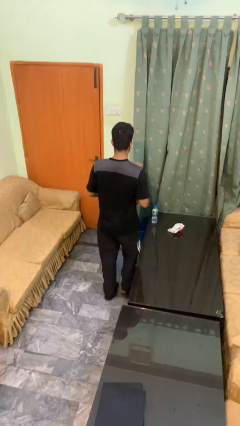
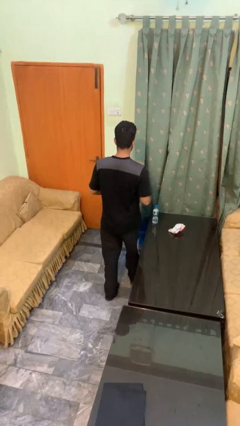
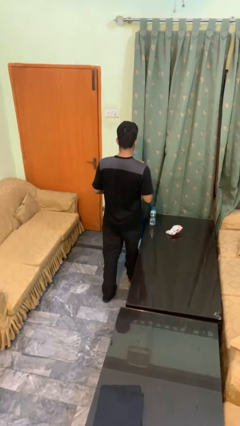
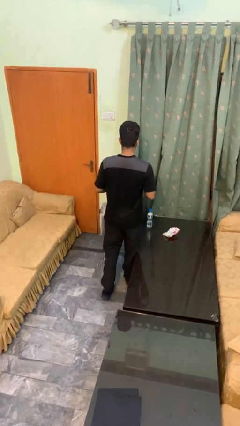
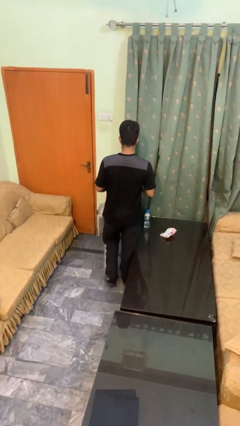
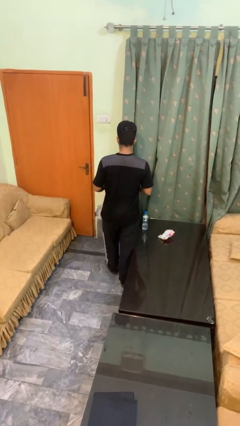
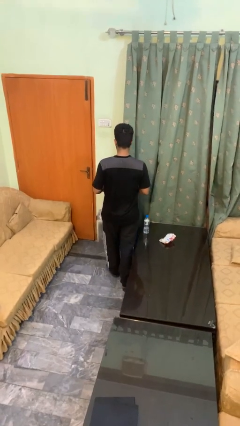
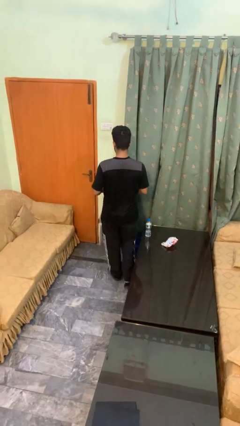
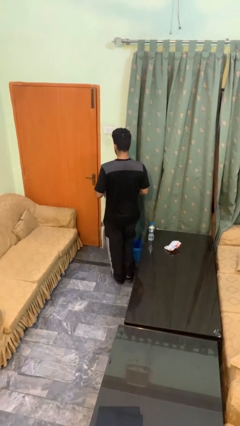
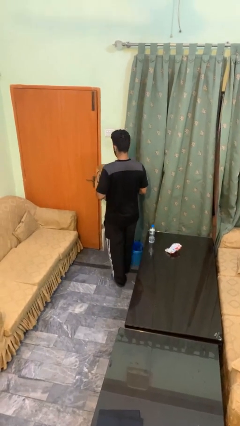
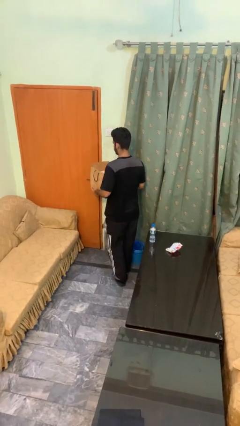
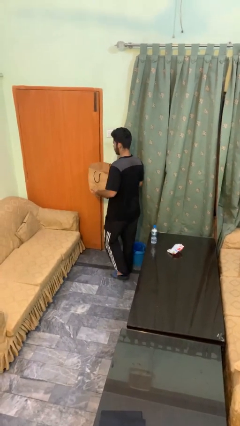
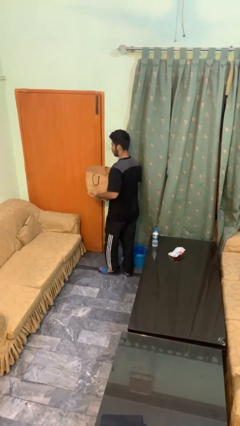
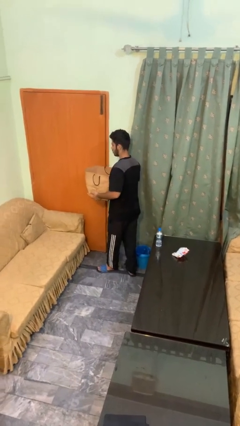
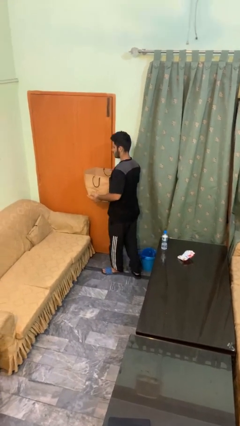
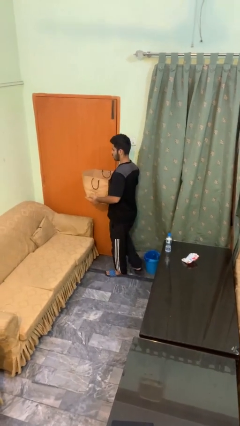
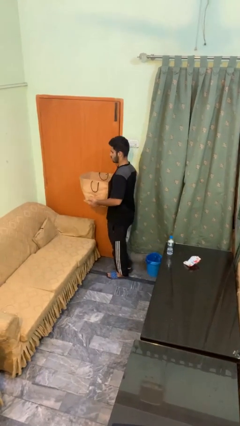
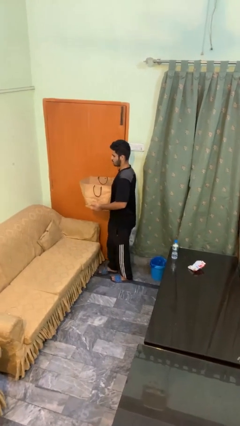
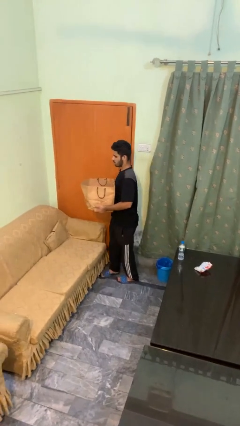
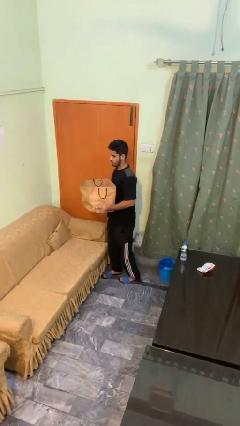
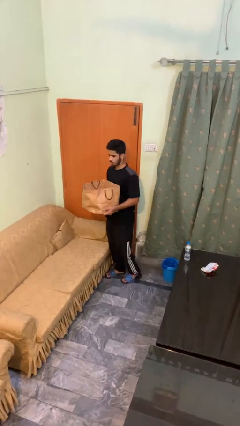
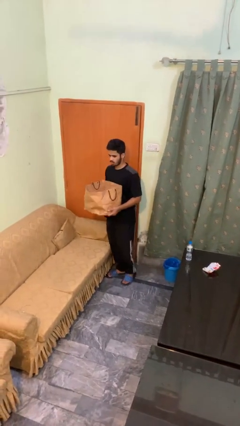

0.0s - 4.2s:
person carries groceries

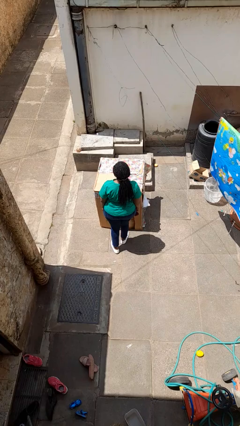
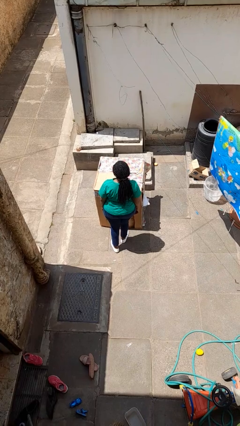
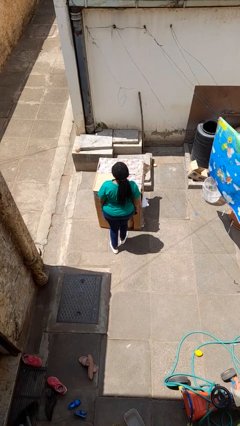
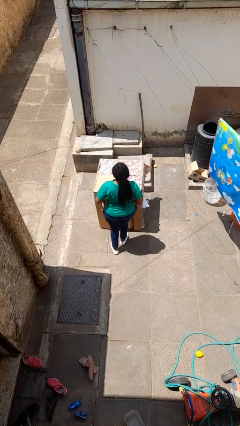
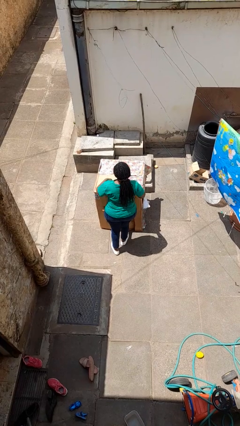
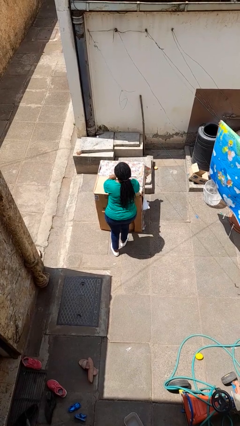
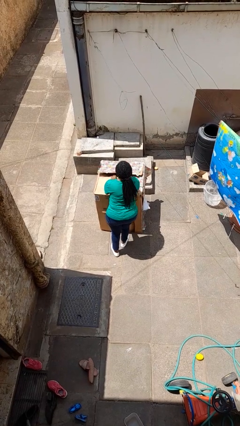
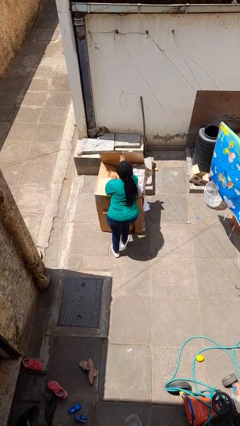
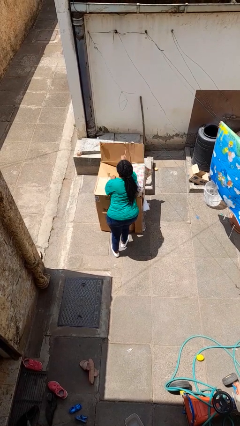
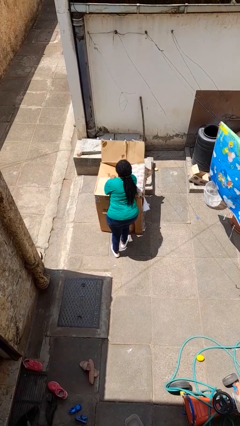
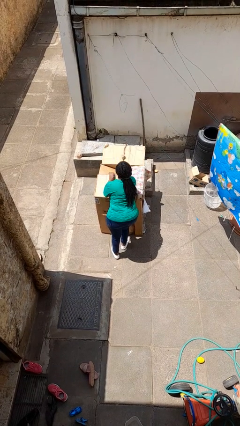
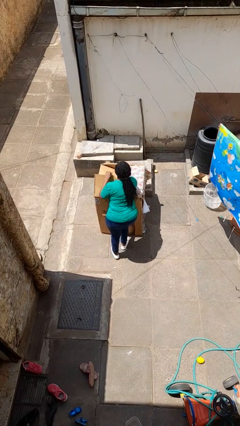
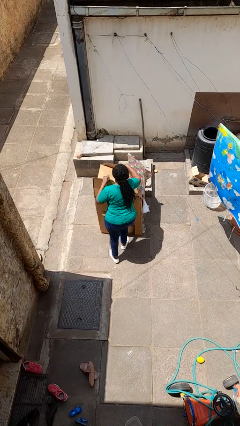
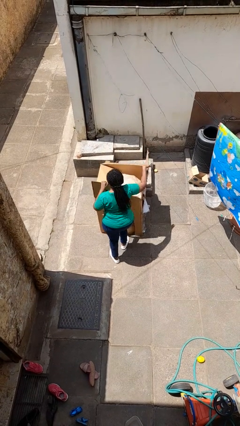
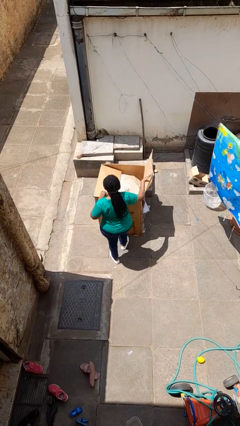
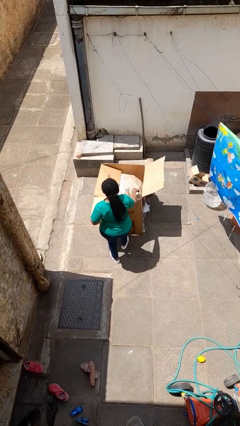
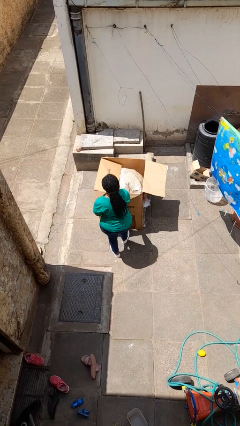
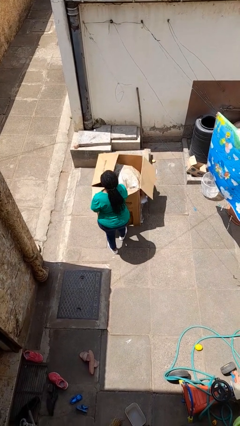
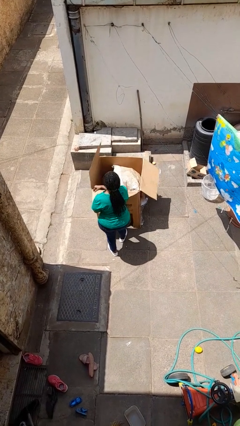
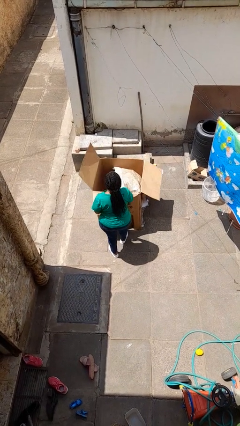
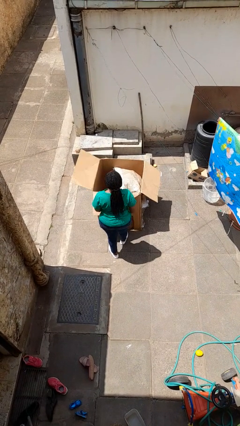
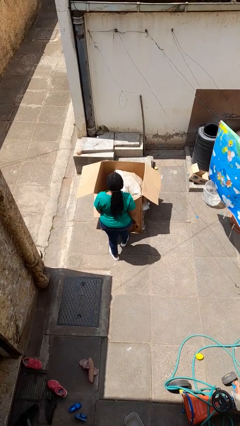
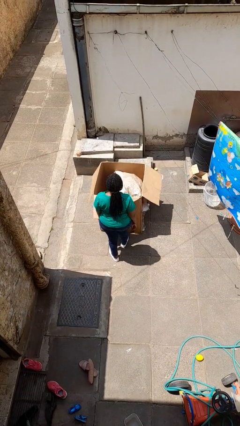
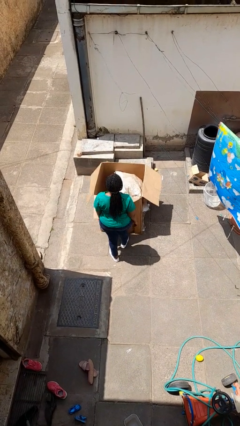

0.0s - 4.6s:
person opens box

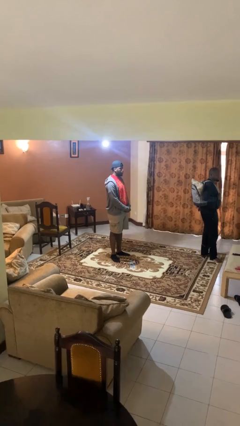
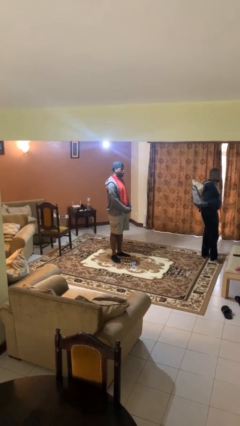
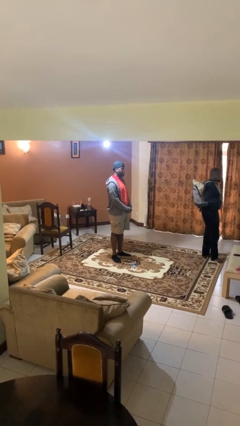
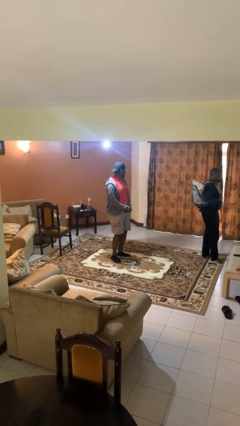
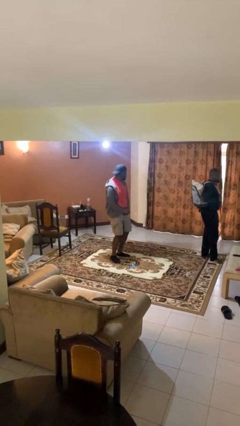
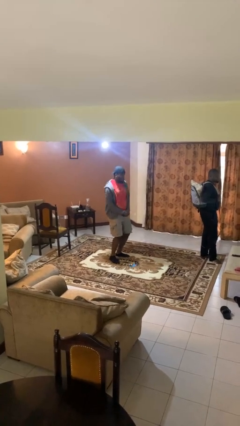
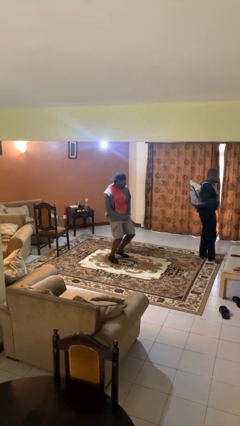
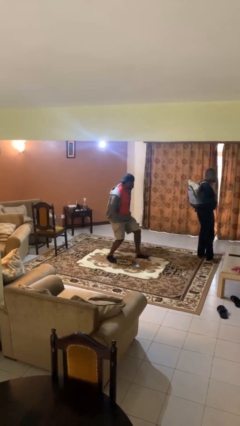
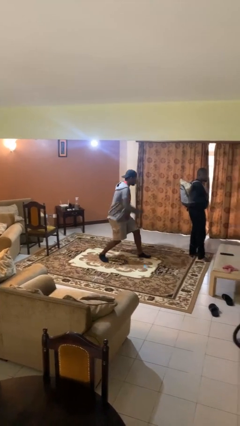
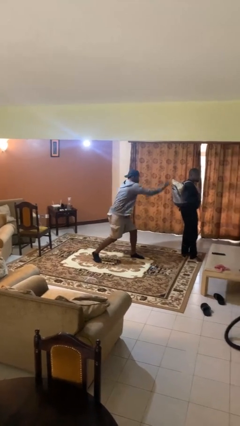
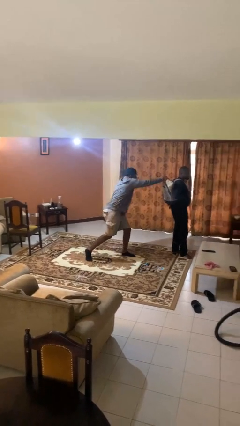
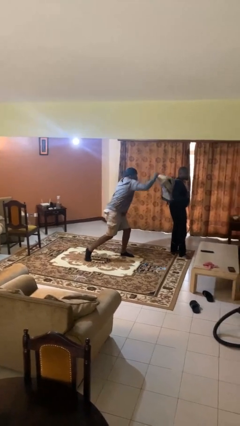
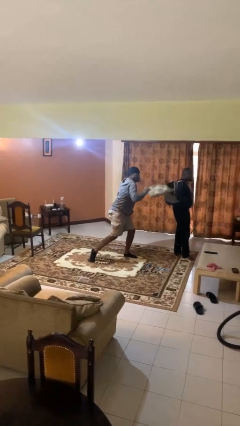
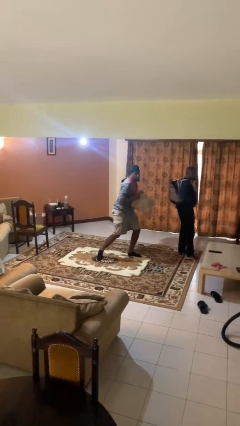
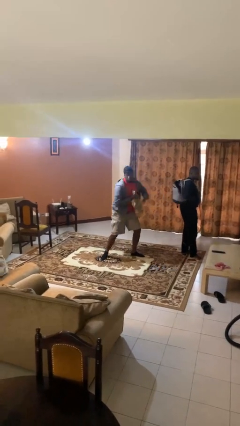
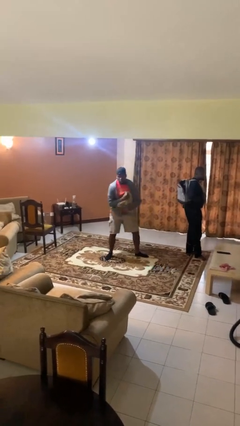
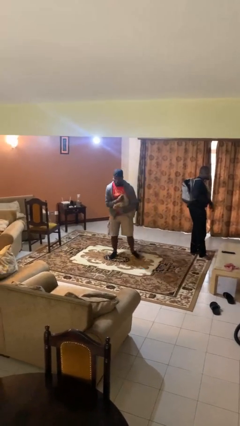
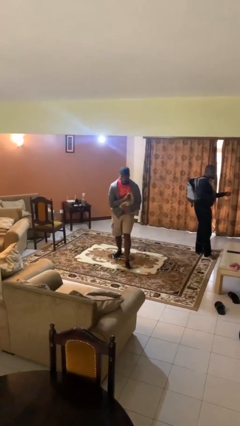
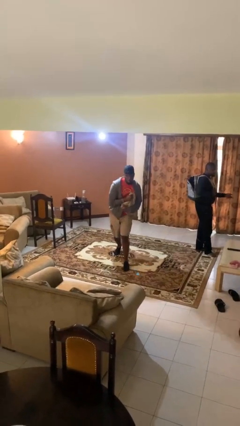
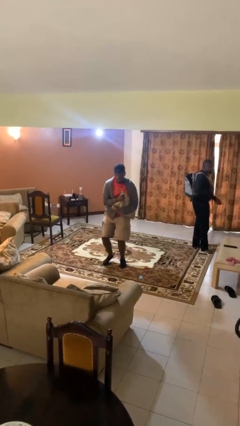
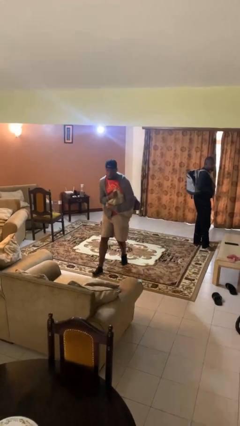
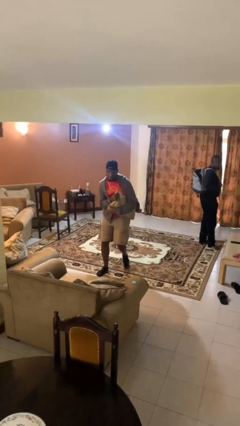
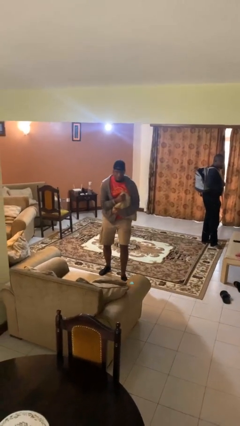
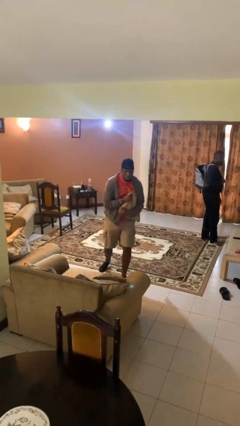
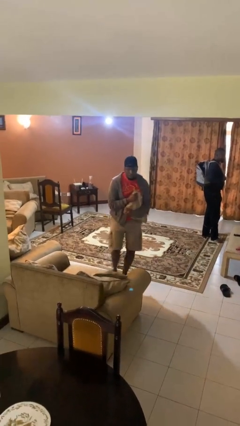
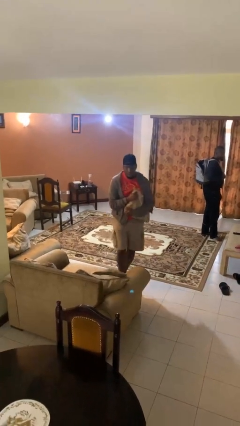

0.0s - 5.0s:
person steals object from person

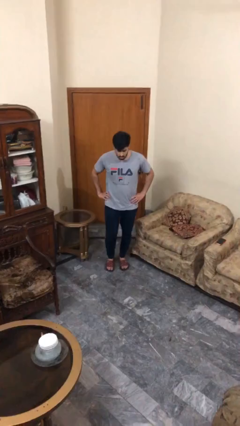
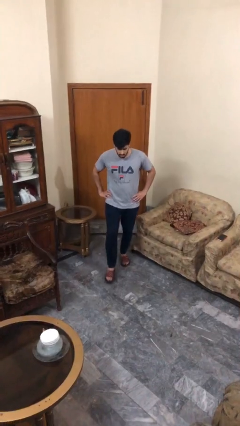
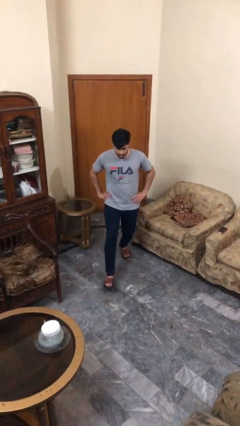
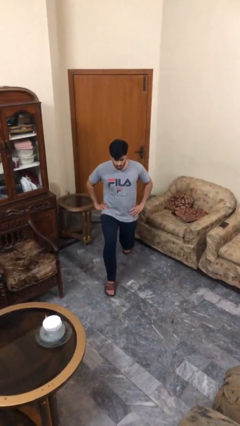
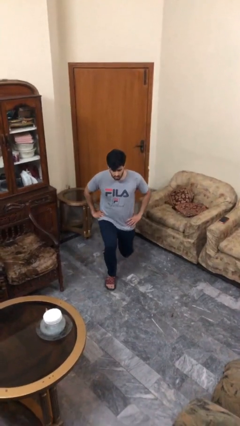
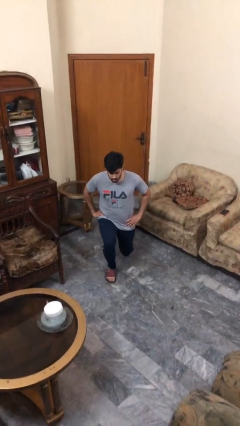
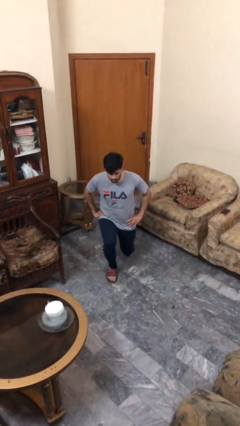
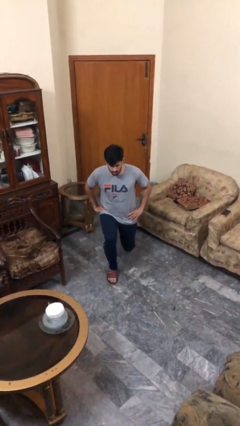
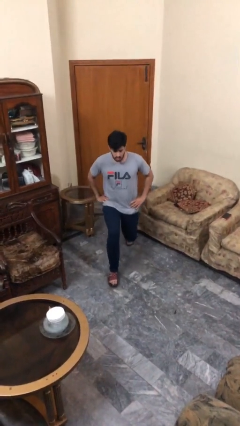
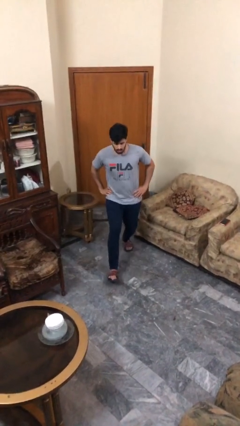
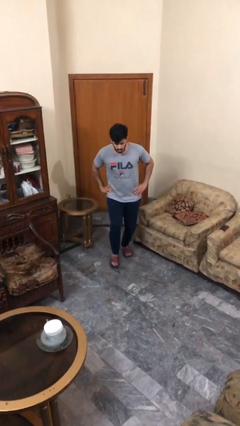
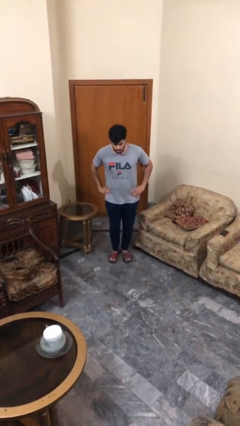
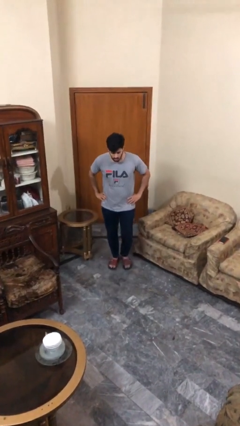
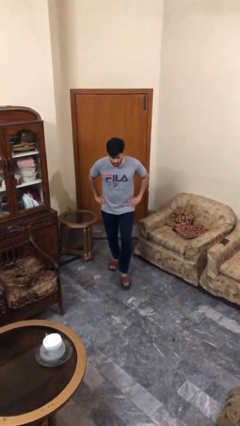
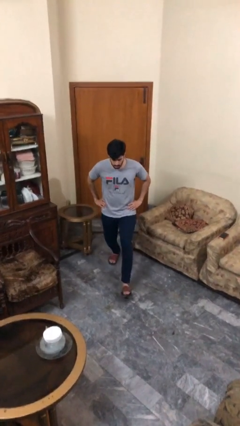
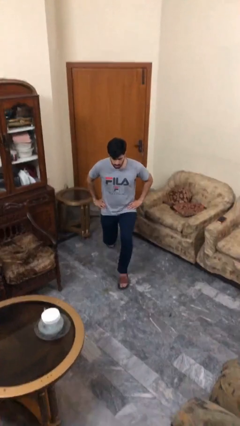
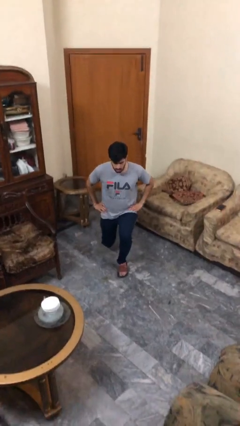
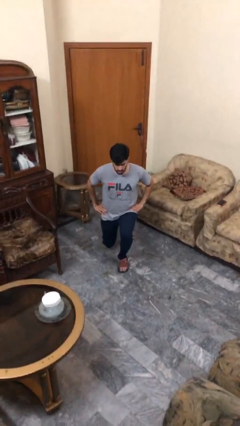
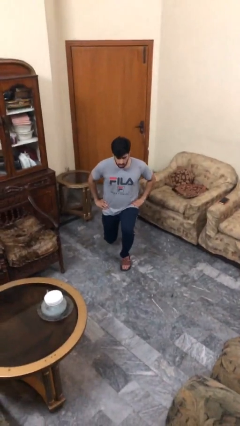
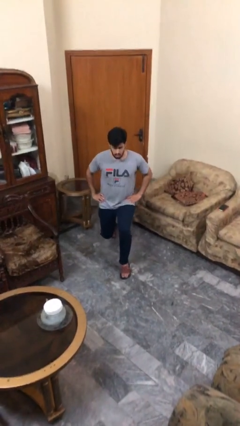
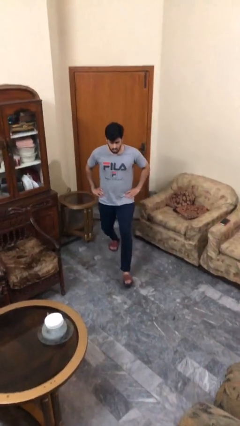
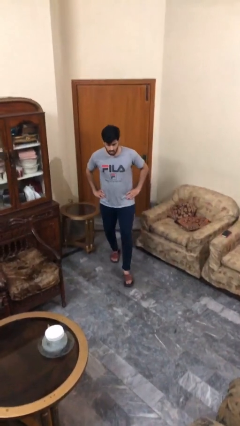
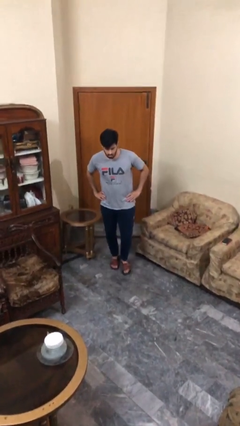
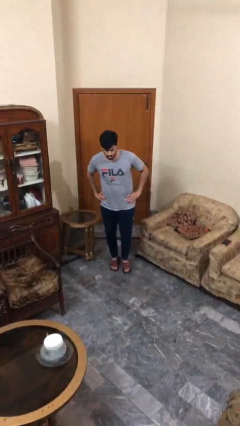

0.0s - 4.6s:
person exercises with lunges
